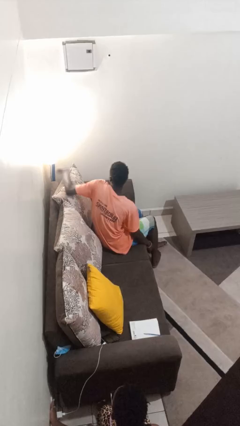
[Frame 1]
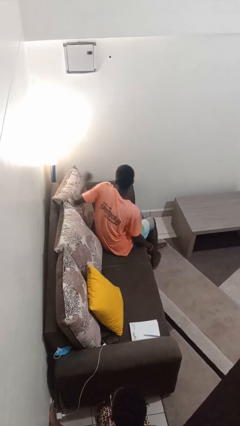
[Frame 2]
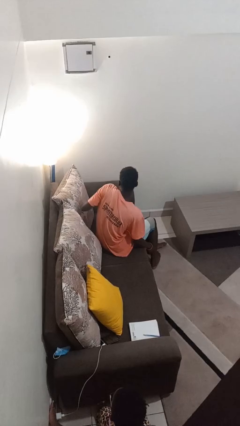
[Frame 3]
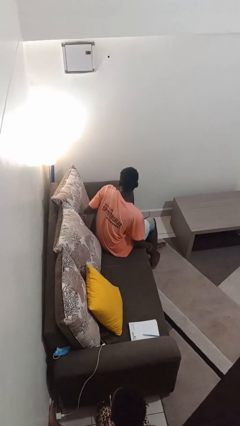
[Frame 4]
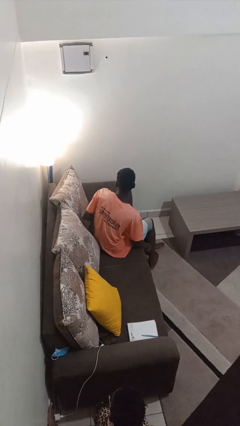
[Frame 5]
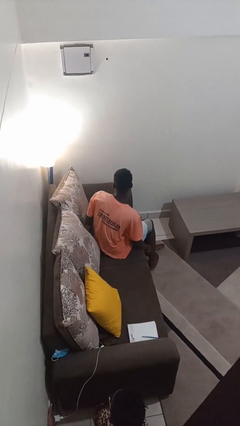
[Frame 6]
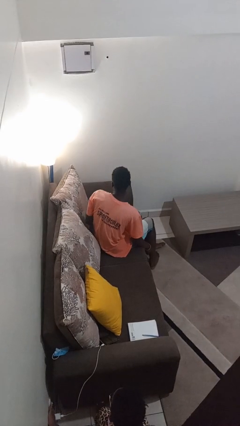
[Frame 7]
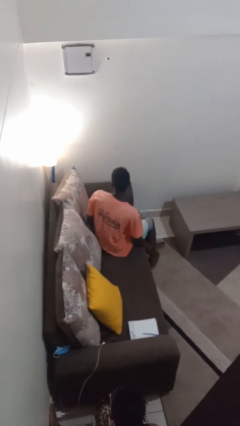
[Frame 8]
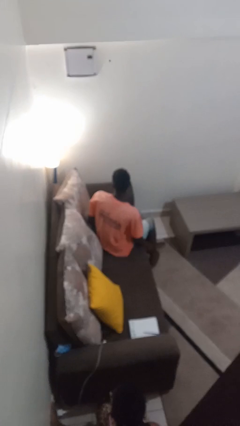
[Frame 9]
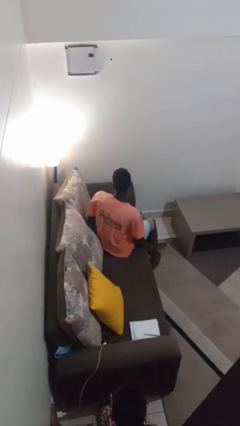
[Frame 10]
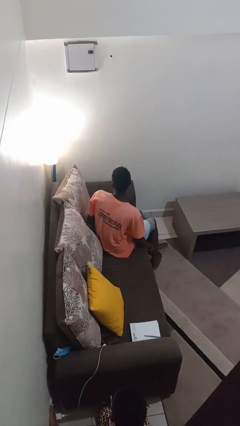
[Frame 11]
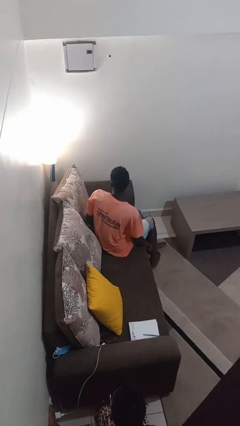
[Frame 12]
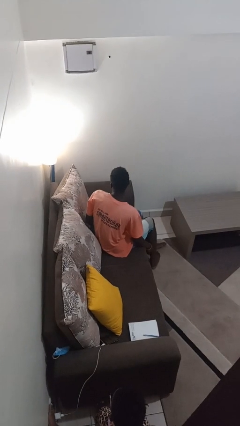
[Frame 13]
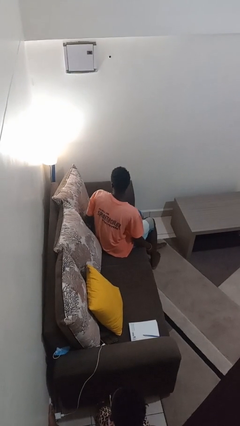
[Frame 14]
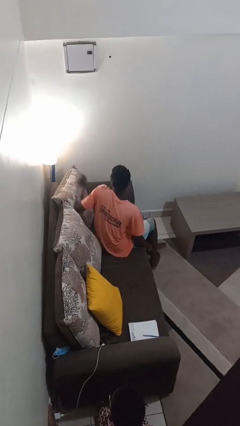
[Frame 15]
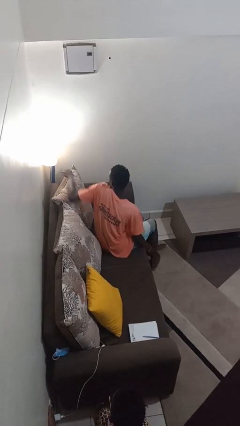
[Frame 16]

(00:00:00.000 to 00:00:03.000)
person turns on lamp

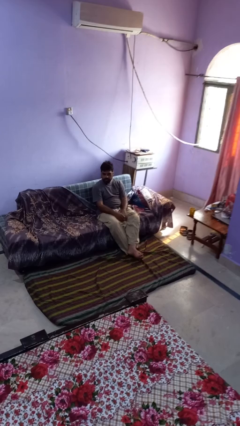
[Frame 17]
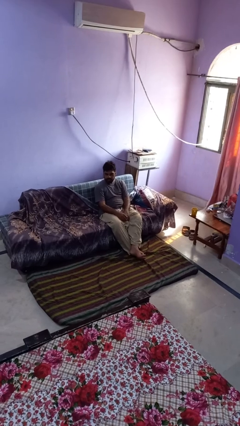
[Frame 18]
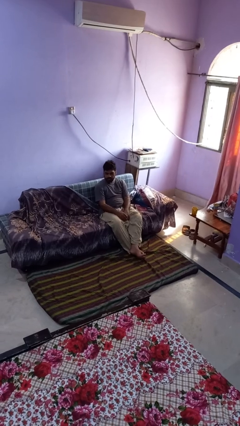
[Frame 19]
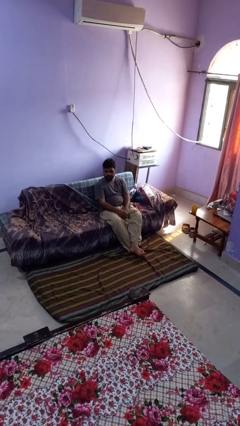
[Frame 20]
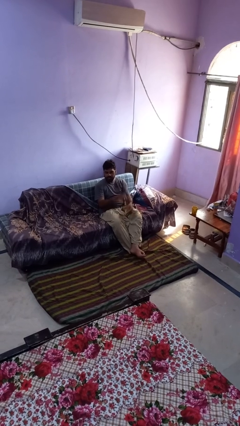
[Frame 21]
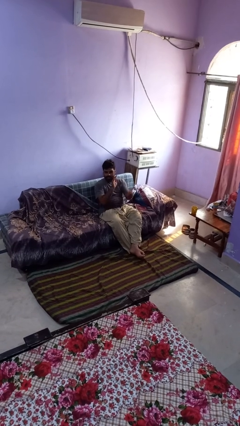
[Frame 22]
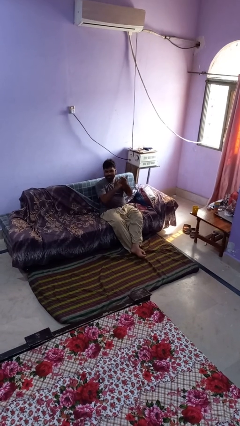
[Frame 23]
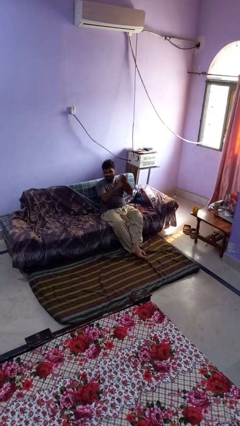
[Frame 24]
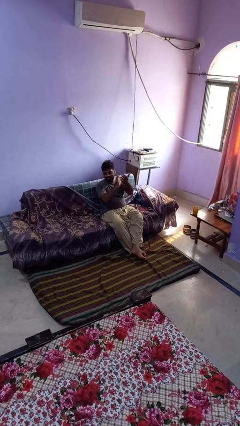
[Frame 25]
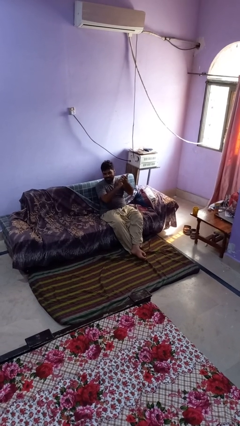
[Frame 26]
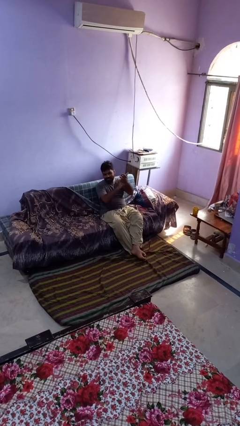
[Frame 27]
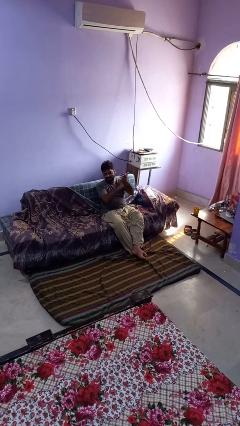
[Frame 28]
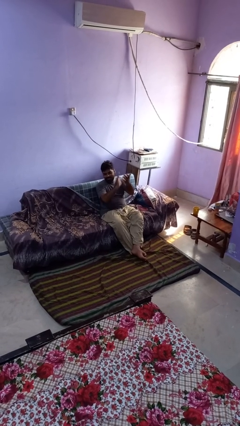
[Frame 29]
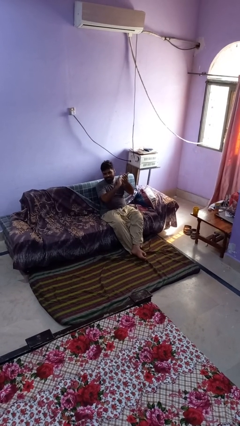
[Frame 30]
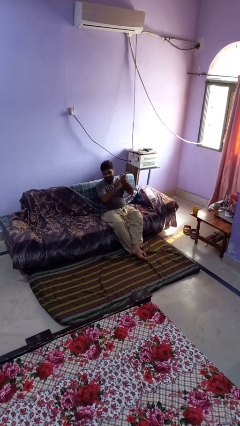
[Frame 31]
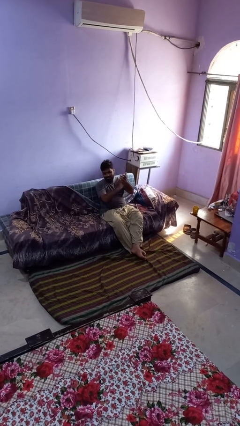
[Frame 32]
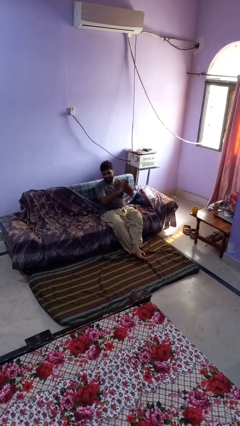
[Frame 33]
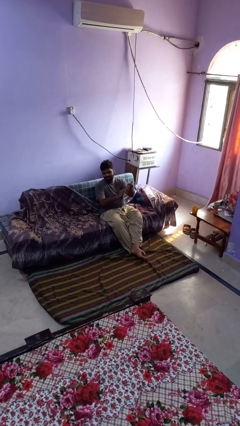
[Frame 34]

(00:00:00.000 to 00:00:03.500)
person claps hands

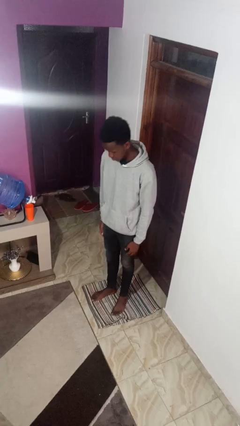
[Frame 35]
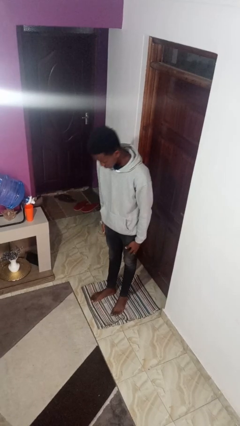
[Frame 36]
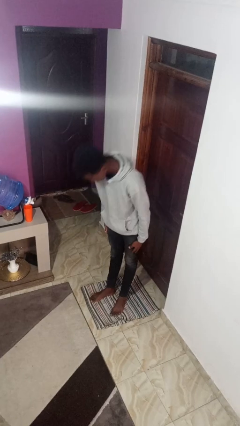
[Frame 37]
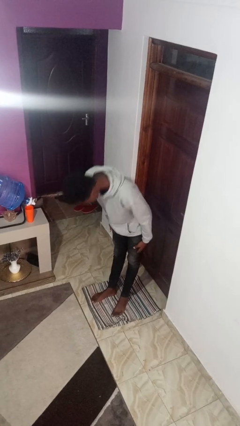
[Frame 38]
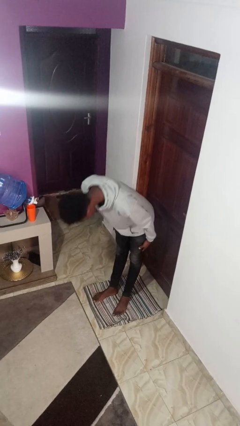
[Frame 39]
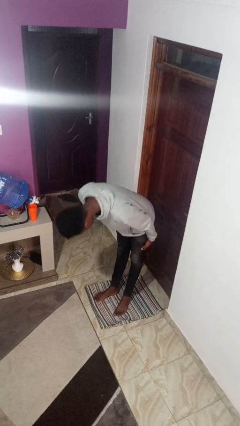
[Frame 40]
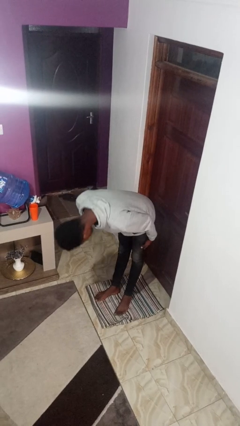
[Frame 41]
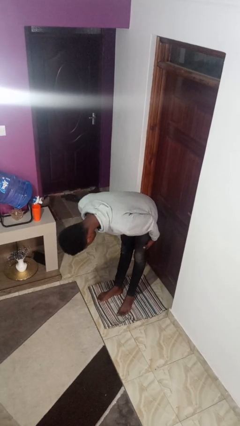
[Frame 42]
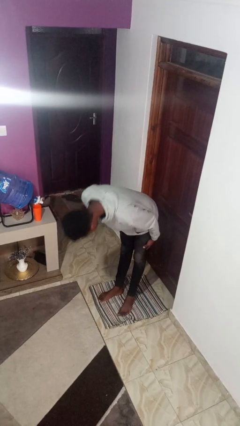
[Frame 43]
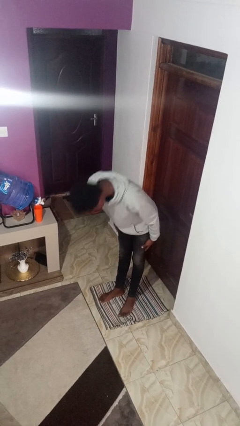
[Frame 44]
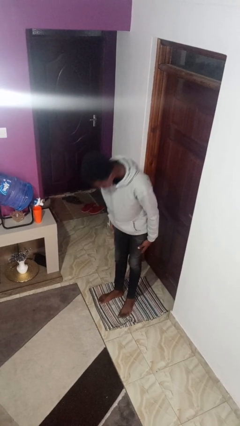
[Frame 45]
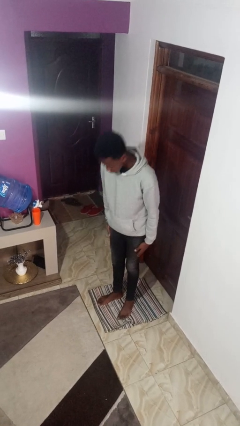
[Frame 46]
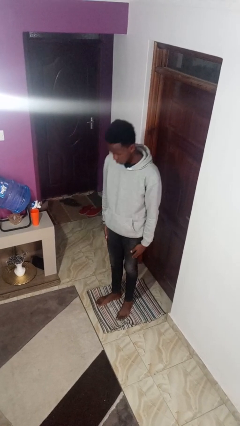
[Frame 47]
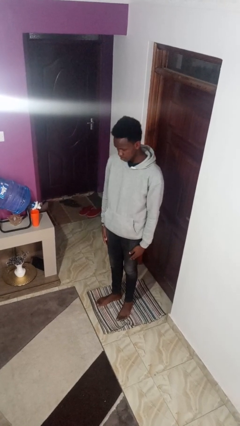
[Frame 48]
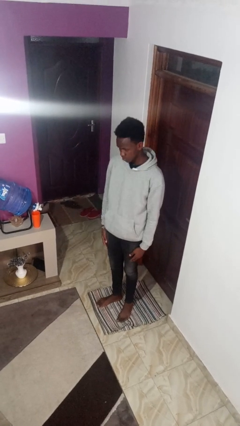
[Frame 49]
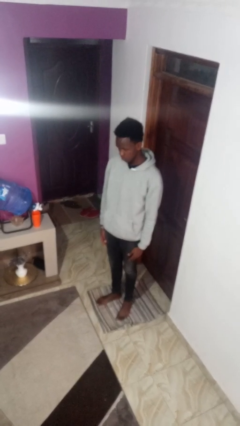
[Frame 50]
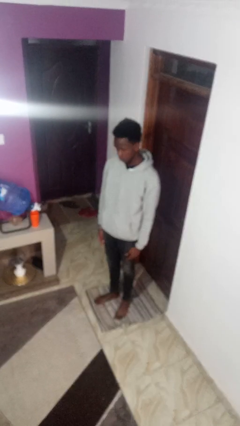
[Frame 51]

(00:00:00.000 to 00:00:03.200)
person bows

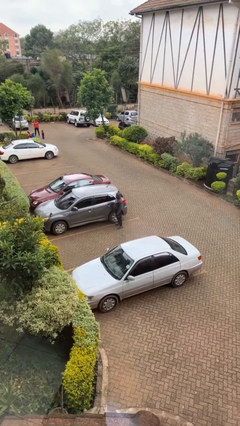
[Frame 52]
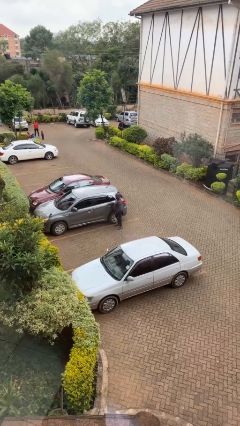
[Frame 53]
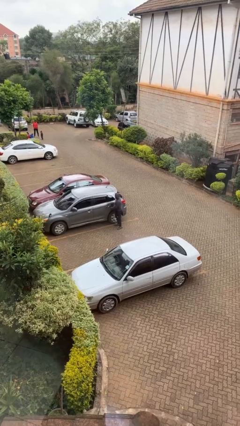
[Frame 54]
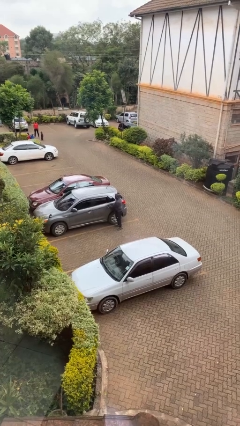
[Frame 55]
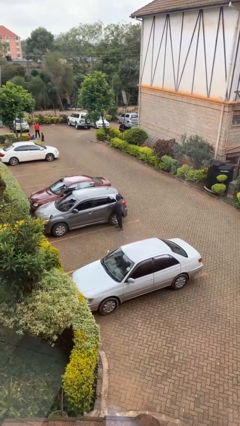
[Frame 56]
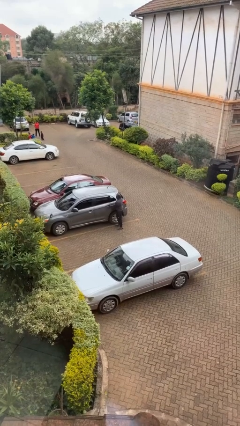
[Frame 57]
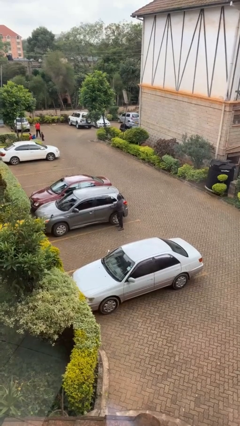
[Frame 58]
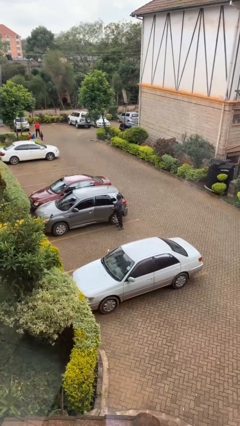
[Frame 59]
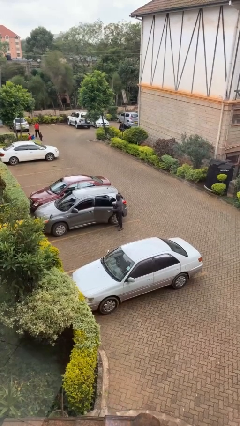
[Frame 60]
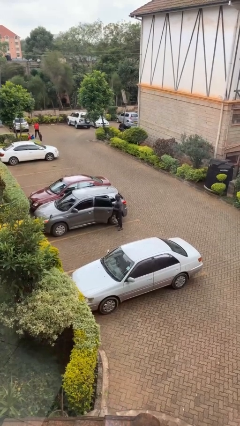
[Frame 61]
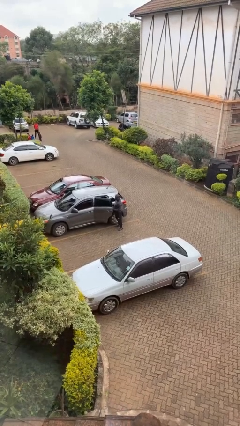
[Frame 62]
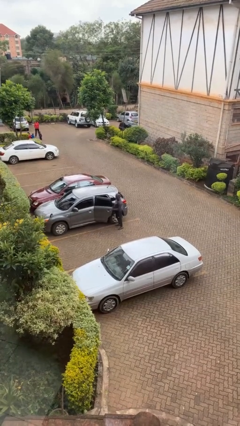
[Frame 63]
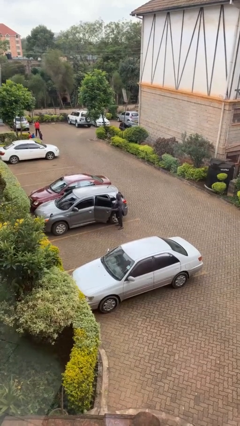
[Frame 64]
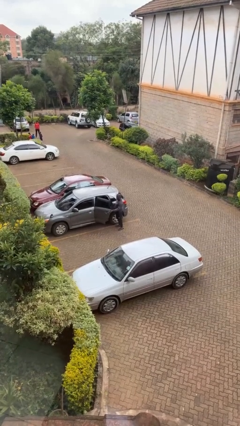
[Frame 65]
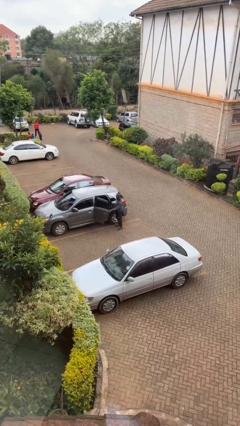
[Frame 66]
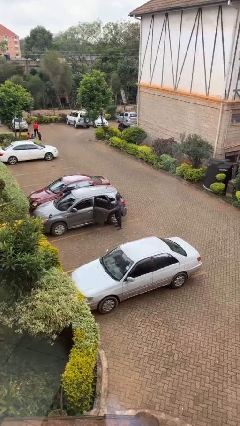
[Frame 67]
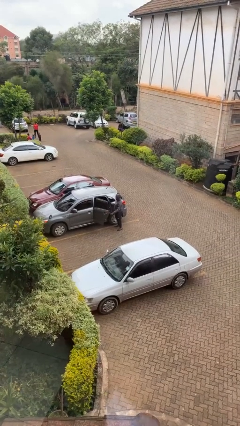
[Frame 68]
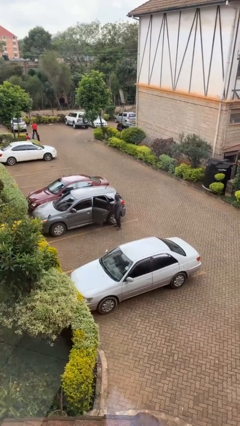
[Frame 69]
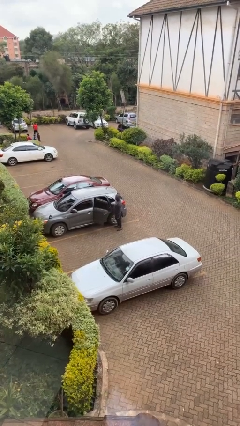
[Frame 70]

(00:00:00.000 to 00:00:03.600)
person opens car door

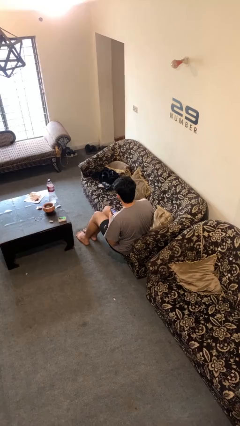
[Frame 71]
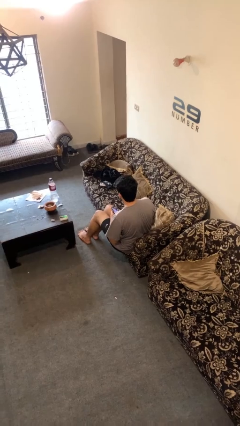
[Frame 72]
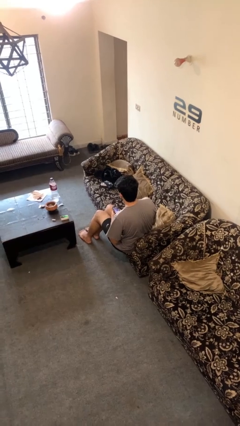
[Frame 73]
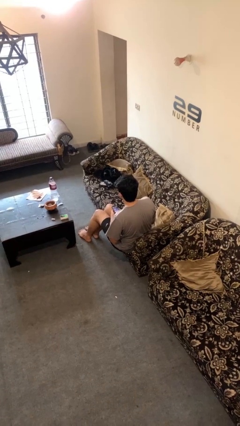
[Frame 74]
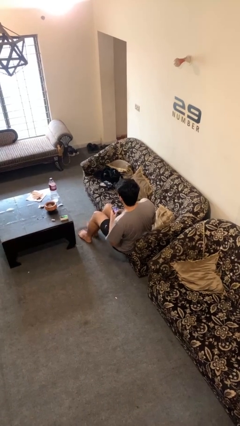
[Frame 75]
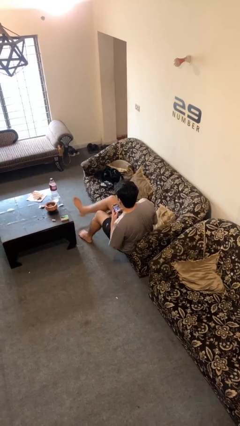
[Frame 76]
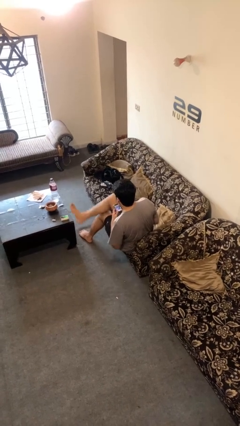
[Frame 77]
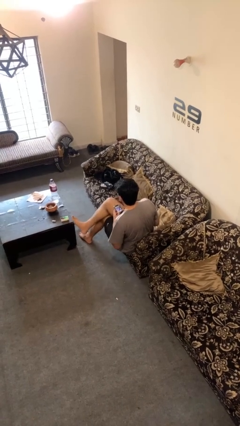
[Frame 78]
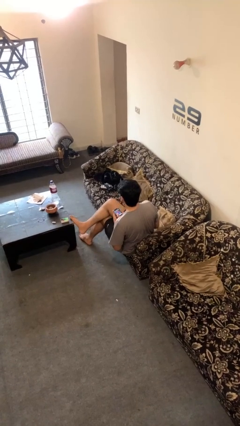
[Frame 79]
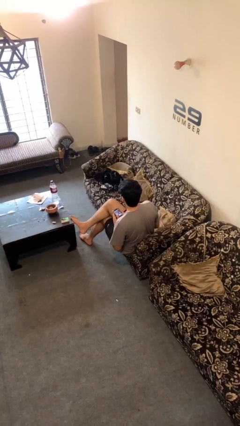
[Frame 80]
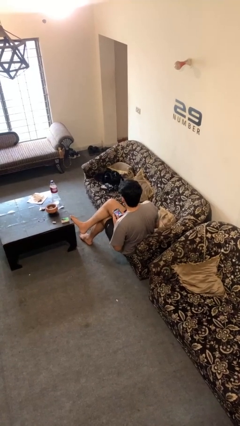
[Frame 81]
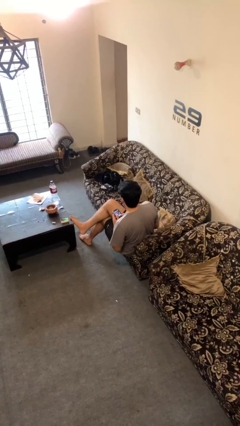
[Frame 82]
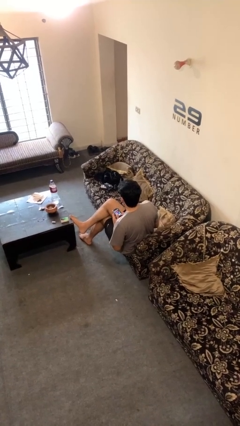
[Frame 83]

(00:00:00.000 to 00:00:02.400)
person crosses legs

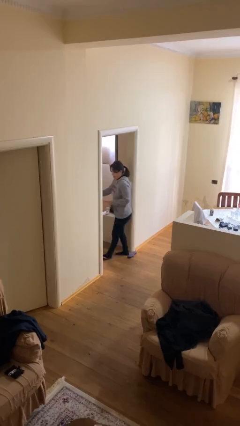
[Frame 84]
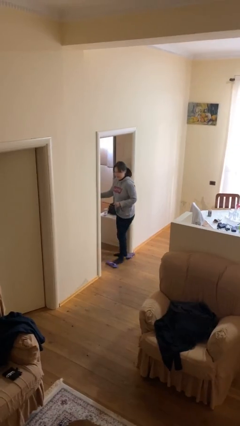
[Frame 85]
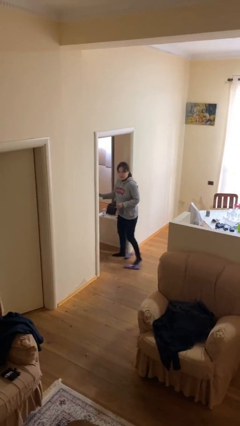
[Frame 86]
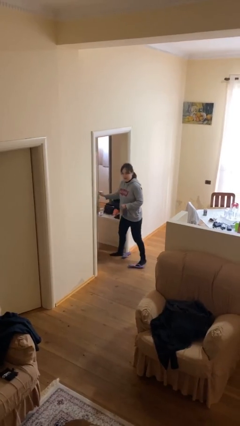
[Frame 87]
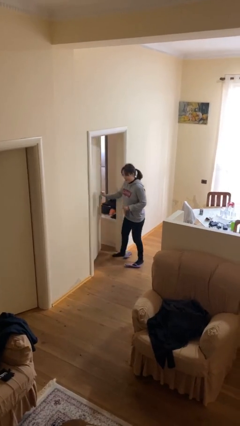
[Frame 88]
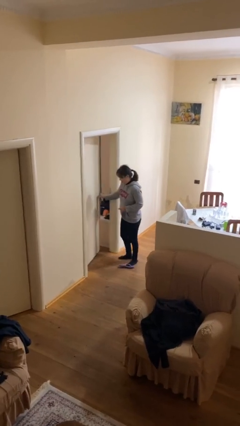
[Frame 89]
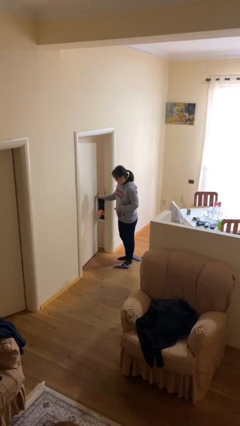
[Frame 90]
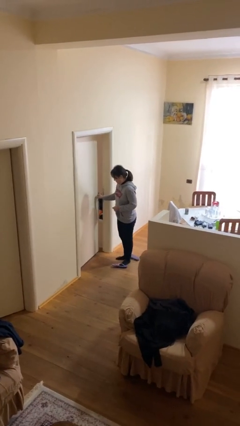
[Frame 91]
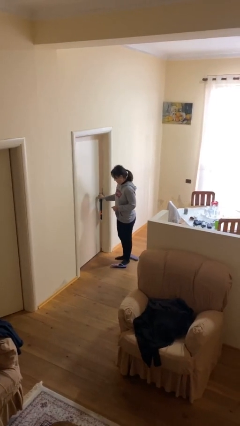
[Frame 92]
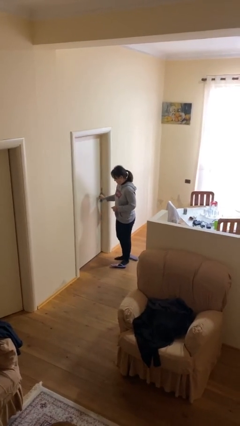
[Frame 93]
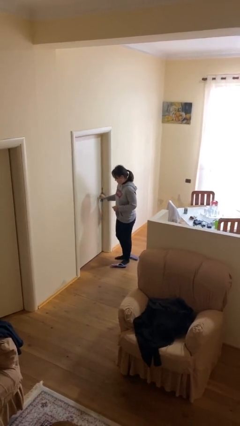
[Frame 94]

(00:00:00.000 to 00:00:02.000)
person closes facility door
